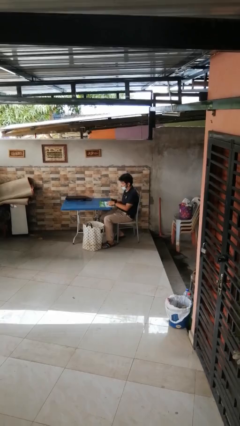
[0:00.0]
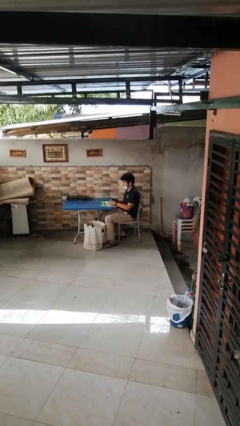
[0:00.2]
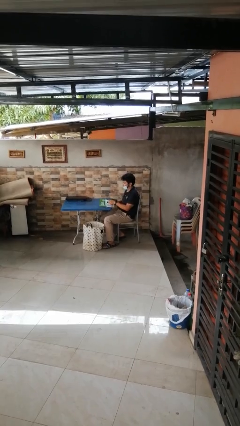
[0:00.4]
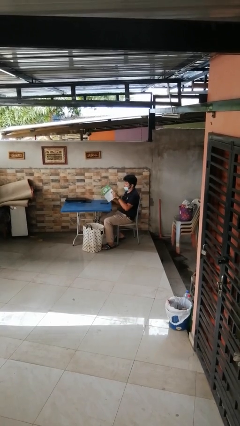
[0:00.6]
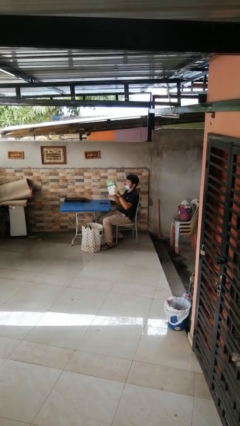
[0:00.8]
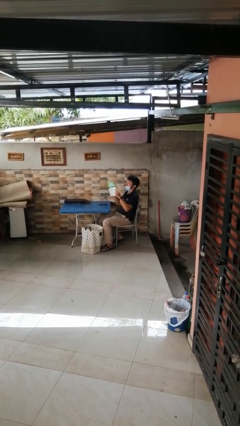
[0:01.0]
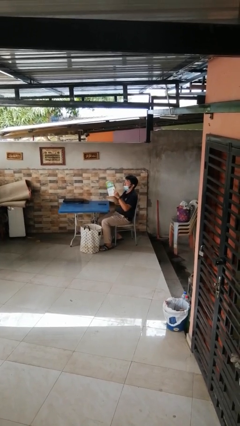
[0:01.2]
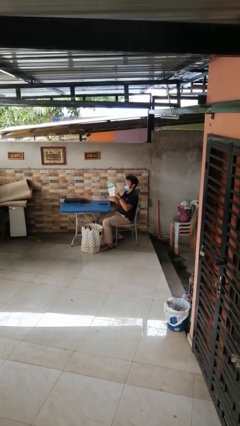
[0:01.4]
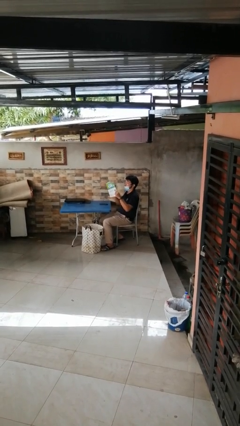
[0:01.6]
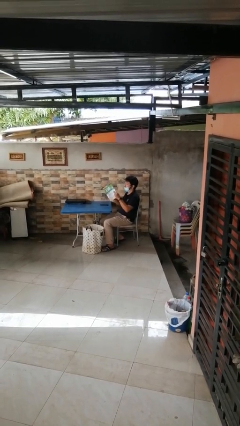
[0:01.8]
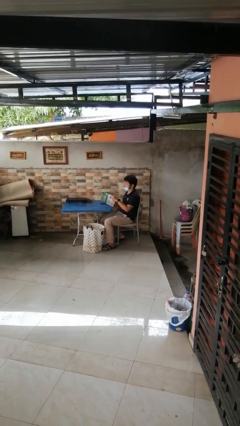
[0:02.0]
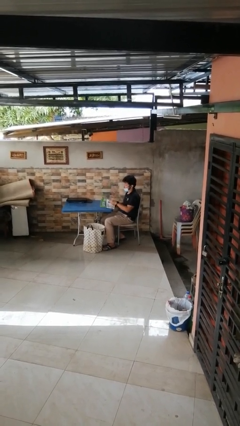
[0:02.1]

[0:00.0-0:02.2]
person reads magazine

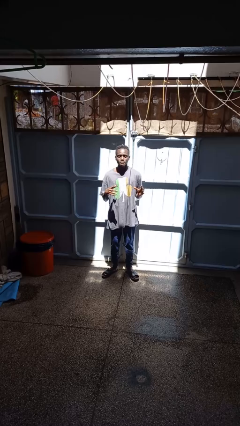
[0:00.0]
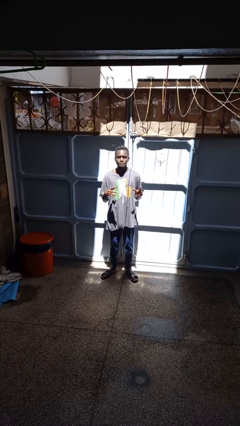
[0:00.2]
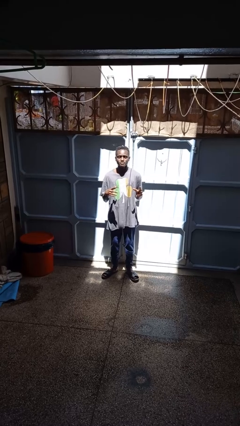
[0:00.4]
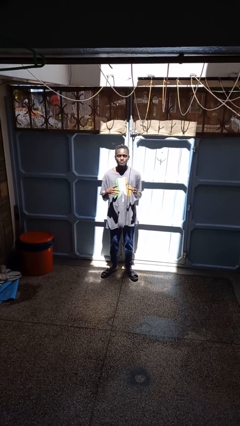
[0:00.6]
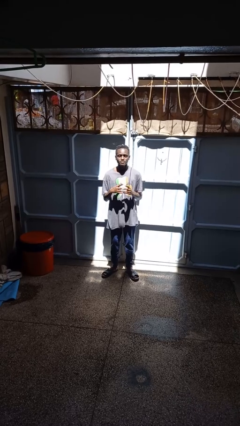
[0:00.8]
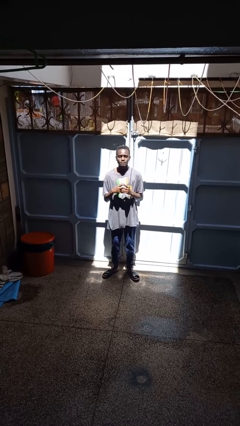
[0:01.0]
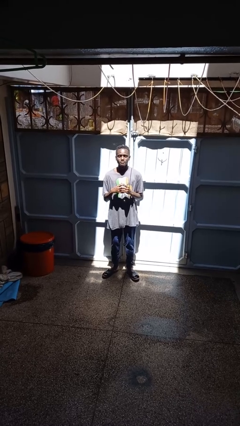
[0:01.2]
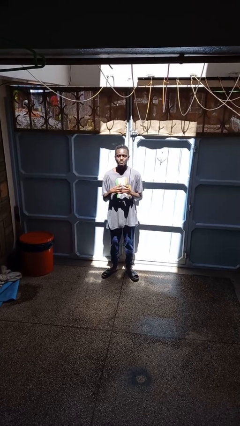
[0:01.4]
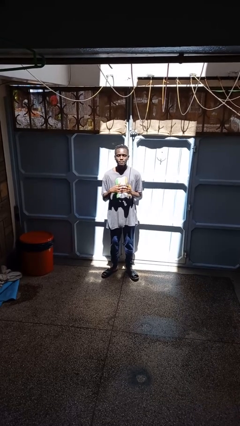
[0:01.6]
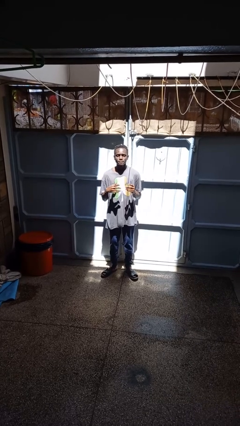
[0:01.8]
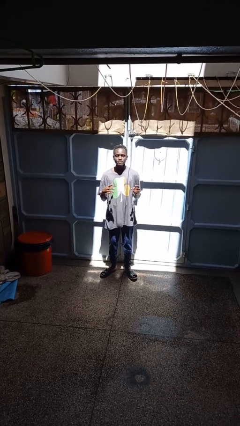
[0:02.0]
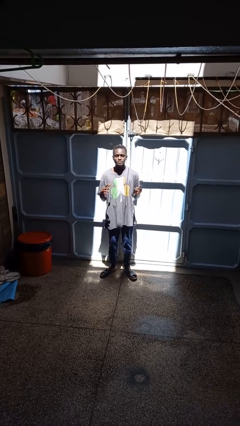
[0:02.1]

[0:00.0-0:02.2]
person takes off ring

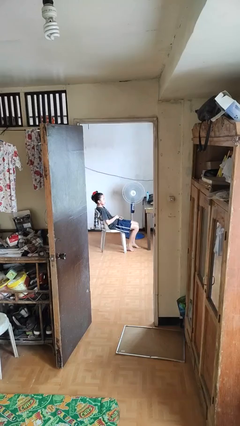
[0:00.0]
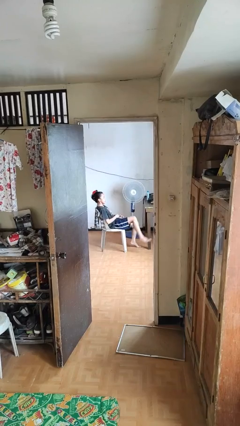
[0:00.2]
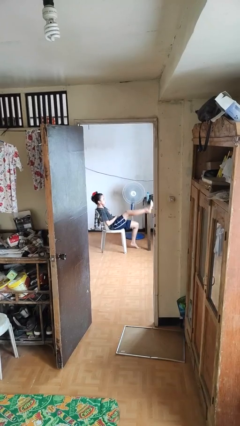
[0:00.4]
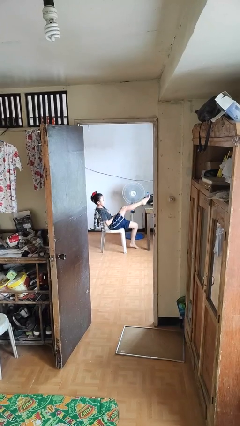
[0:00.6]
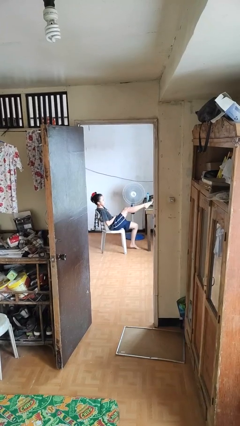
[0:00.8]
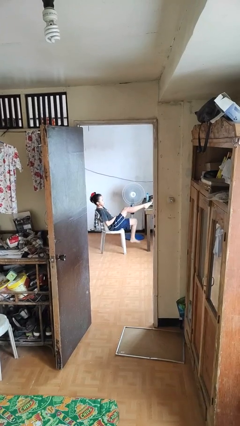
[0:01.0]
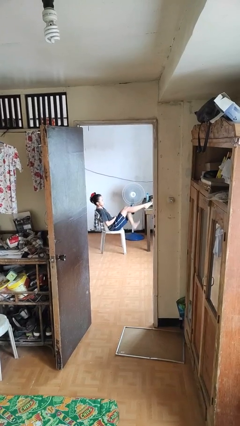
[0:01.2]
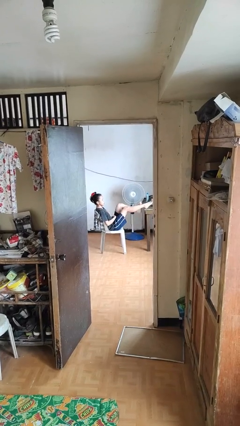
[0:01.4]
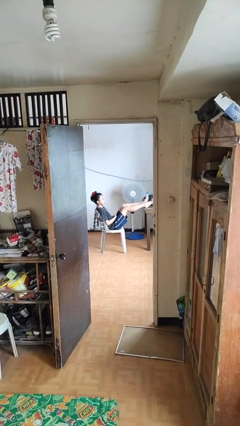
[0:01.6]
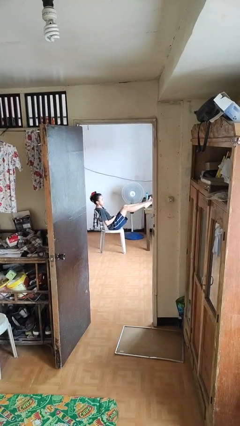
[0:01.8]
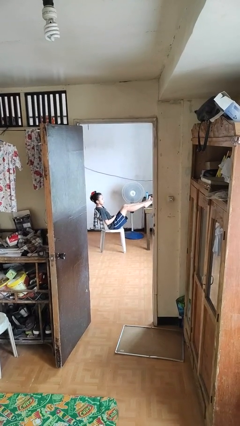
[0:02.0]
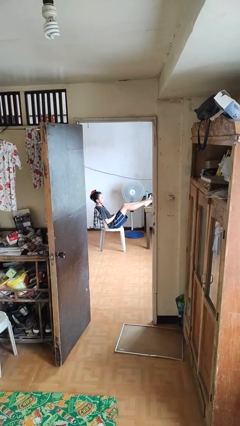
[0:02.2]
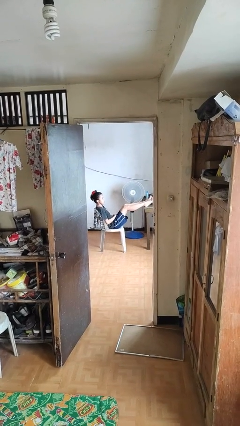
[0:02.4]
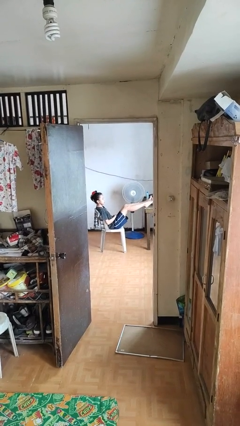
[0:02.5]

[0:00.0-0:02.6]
person puts feet up

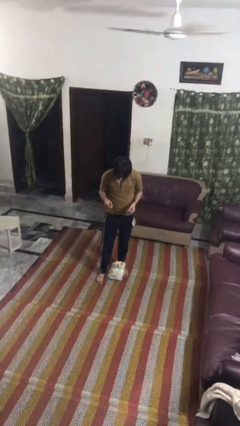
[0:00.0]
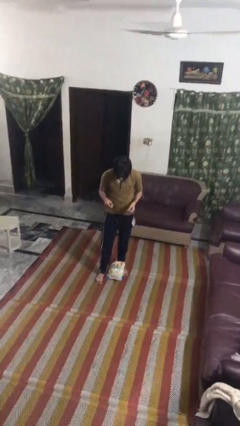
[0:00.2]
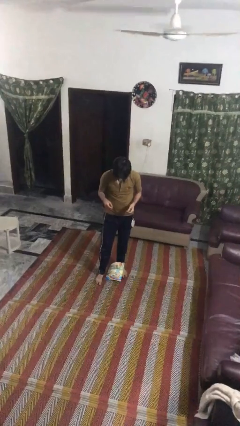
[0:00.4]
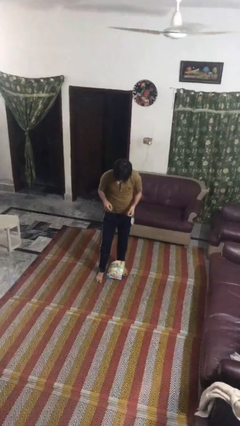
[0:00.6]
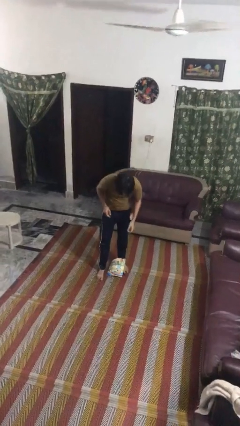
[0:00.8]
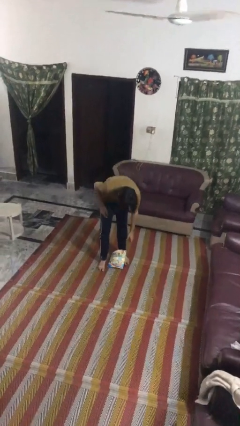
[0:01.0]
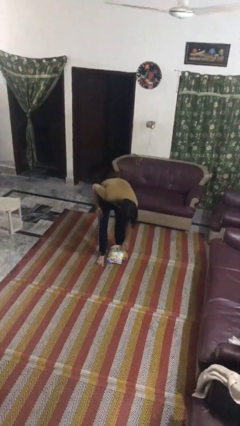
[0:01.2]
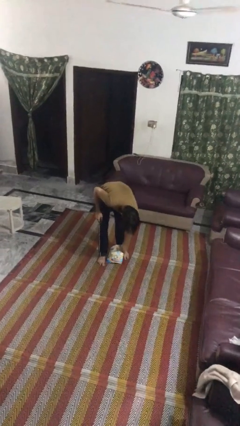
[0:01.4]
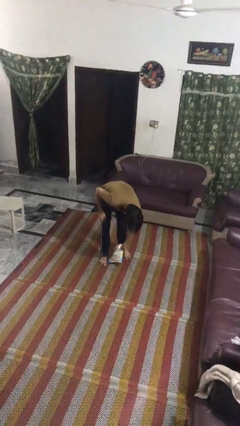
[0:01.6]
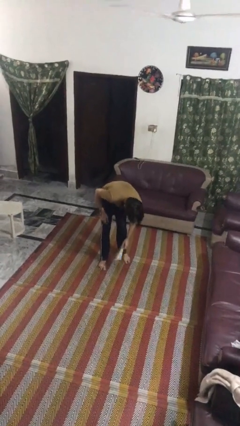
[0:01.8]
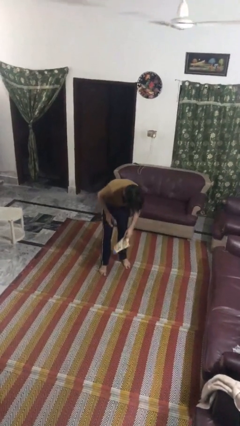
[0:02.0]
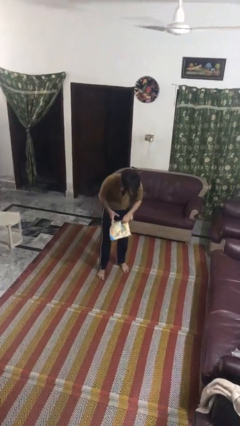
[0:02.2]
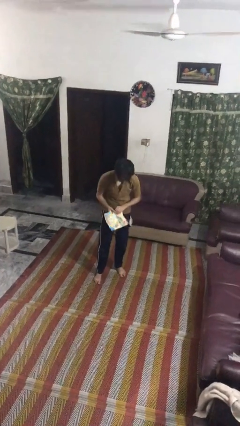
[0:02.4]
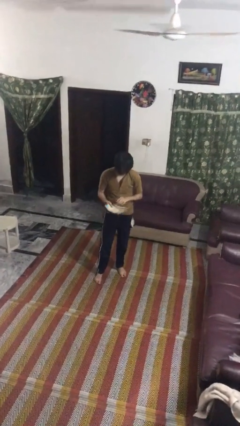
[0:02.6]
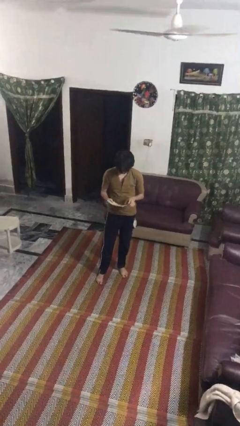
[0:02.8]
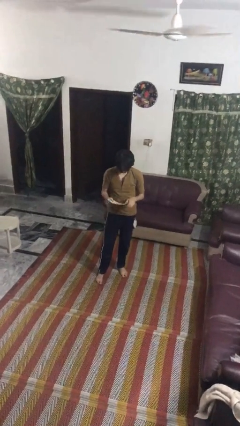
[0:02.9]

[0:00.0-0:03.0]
person picks up object from floor

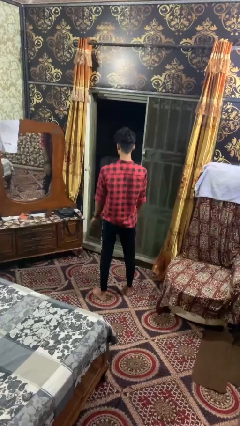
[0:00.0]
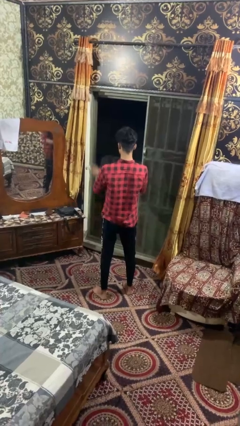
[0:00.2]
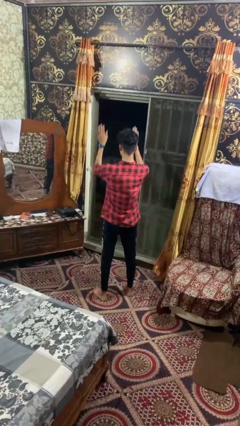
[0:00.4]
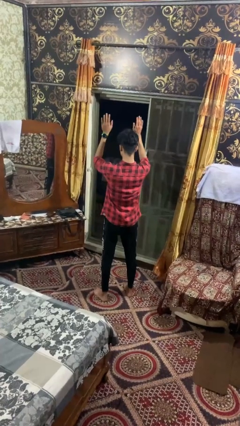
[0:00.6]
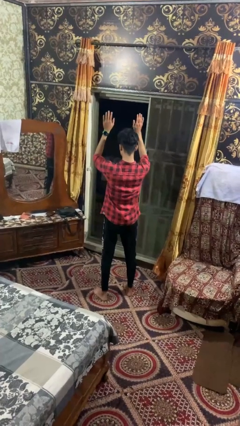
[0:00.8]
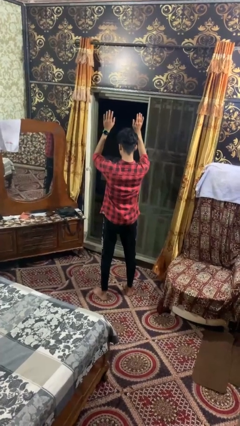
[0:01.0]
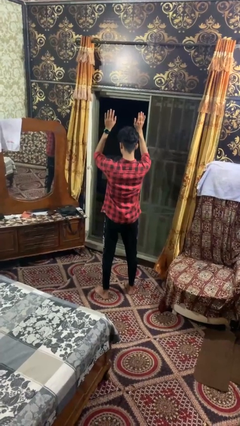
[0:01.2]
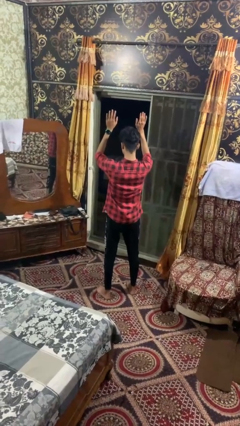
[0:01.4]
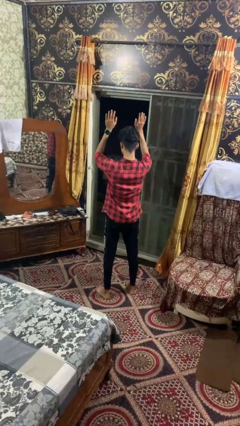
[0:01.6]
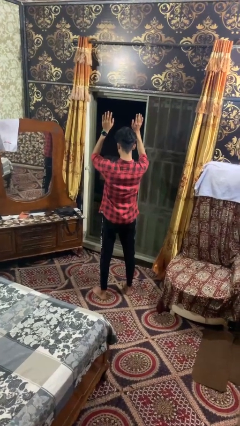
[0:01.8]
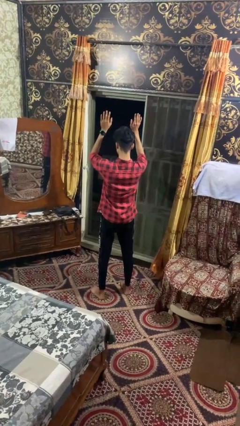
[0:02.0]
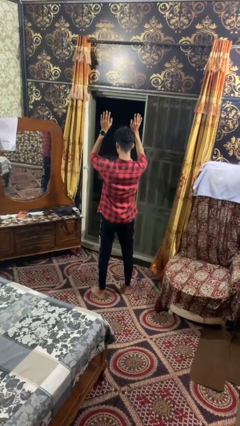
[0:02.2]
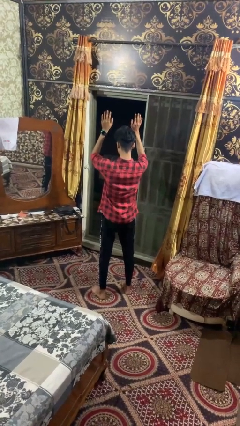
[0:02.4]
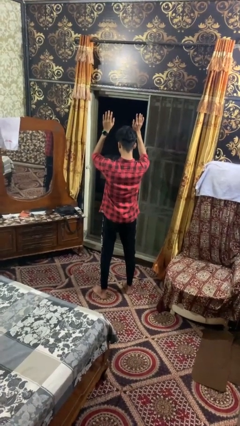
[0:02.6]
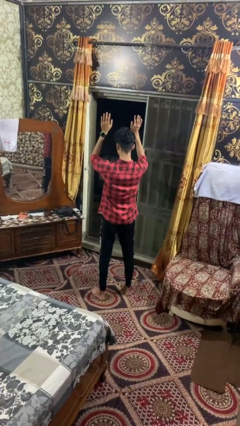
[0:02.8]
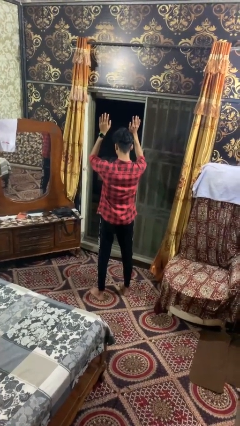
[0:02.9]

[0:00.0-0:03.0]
person gestures swipe up

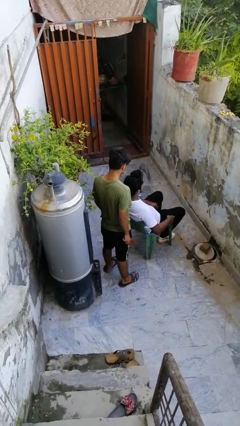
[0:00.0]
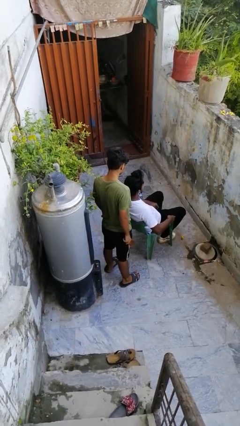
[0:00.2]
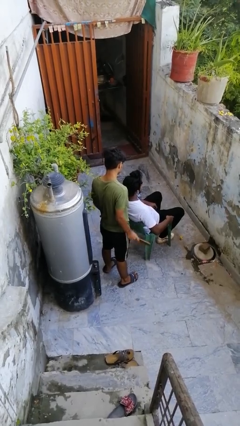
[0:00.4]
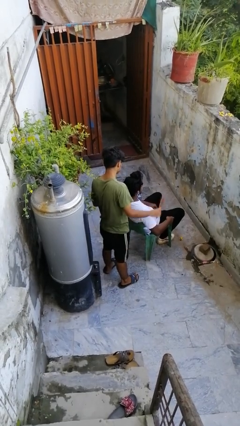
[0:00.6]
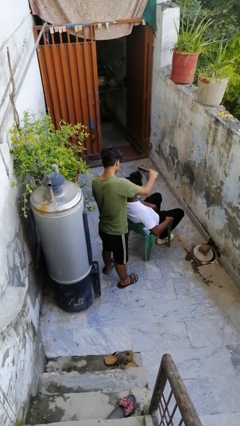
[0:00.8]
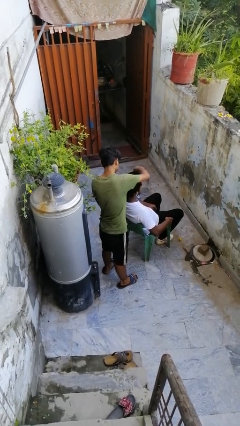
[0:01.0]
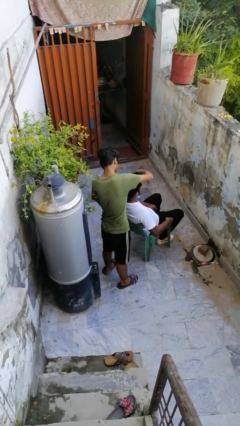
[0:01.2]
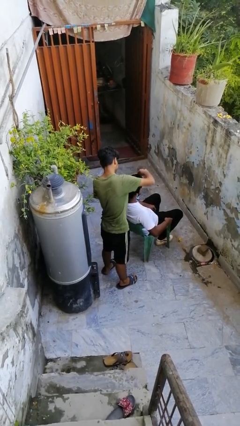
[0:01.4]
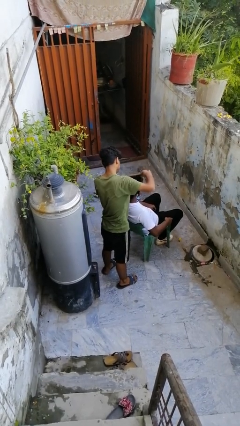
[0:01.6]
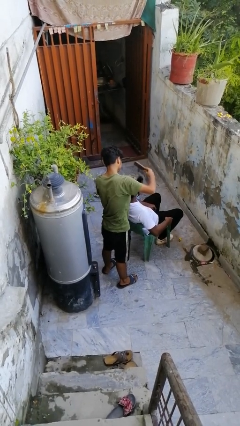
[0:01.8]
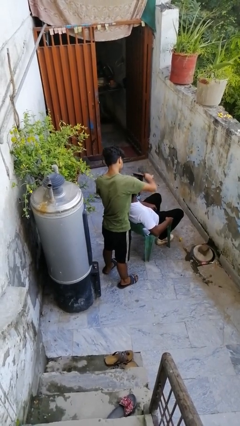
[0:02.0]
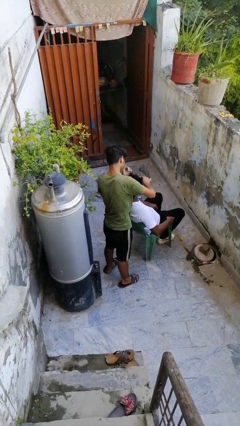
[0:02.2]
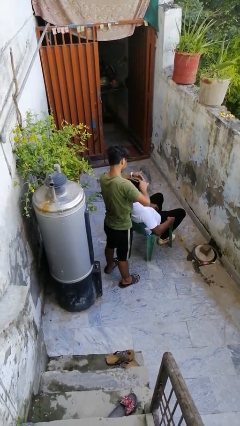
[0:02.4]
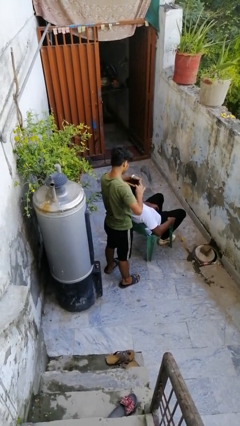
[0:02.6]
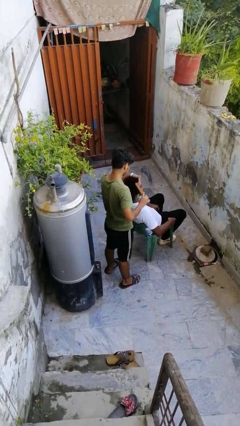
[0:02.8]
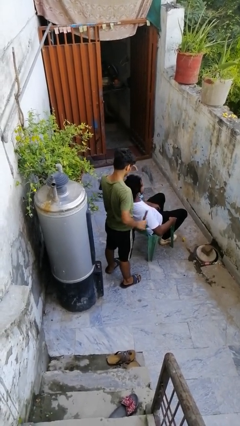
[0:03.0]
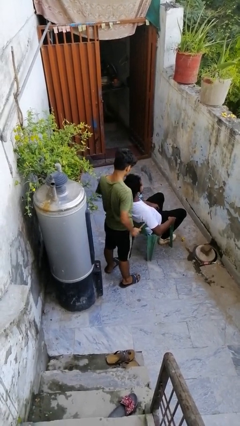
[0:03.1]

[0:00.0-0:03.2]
person brushes hair of person

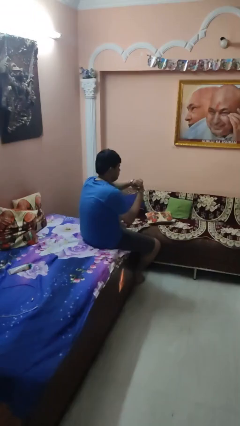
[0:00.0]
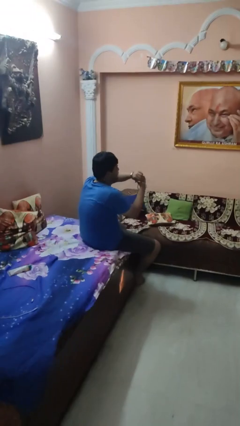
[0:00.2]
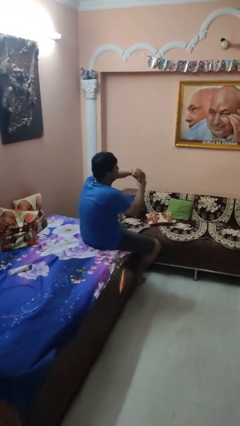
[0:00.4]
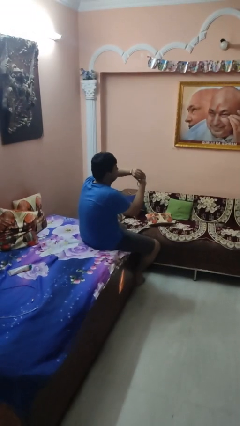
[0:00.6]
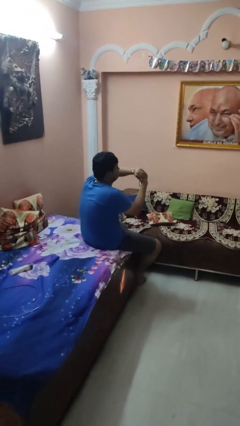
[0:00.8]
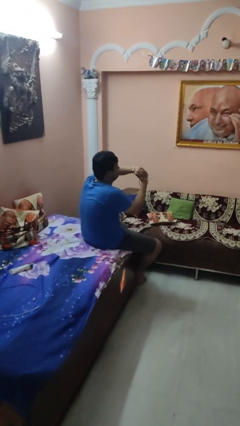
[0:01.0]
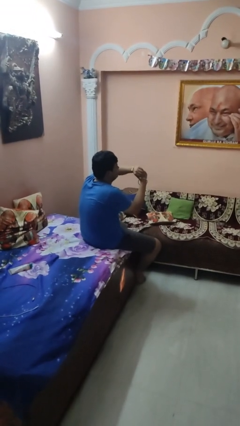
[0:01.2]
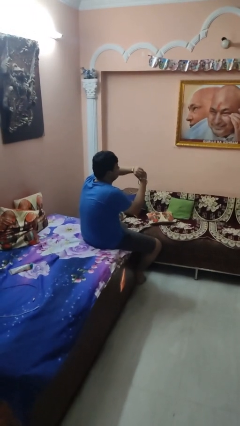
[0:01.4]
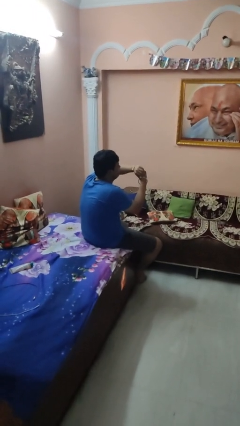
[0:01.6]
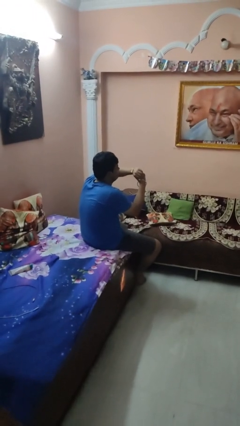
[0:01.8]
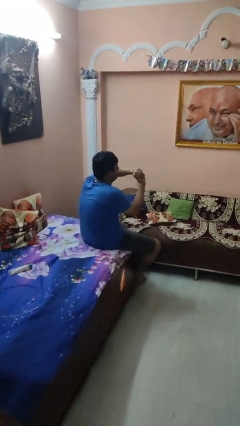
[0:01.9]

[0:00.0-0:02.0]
person looks at wristwatch
